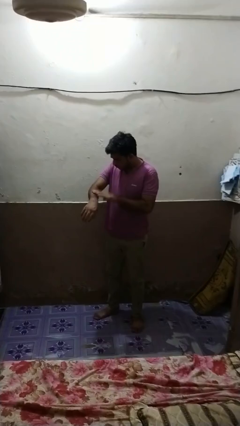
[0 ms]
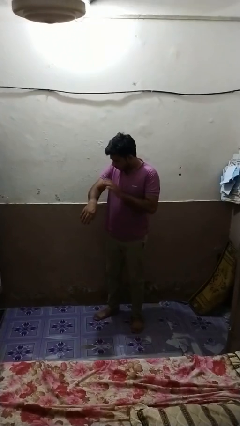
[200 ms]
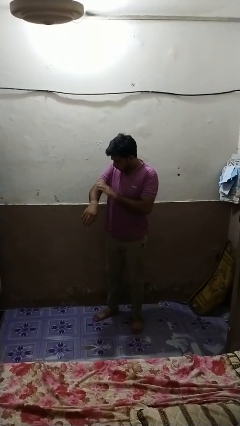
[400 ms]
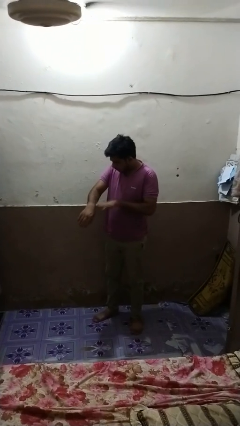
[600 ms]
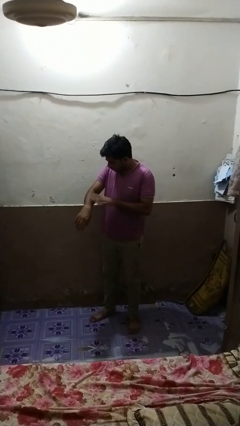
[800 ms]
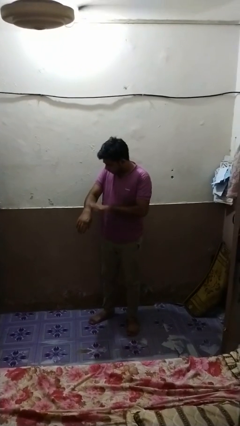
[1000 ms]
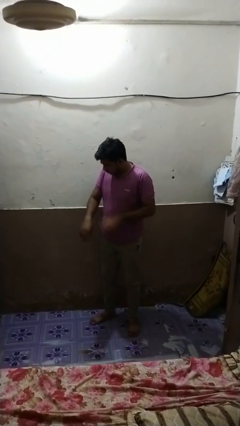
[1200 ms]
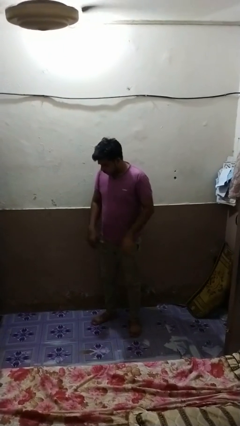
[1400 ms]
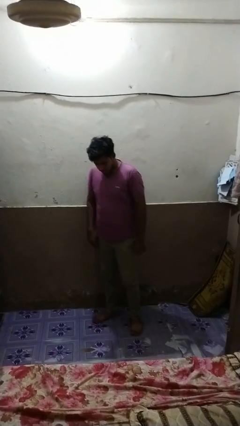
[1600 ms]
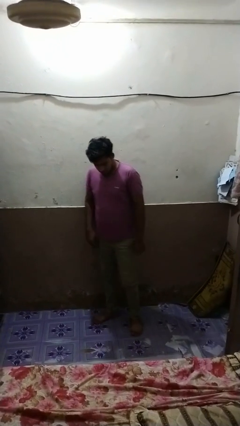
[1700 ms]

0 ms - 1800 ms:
person swats bug

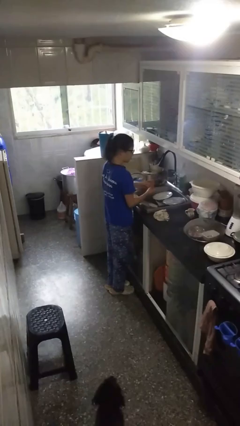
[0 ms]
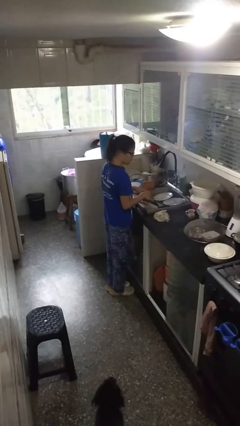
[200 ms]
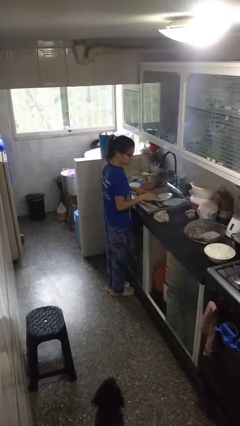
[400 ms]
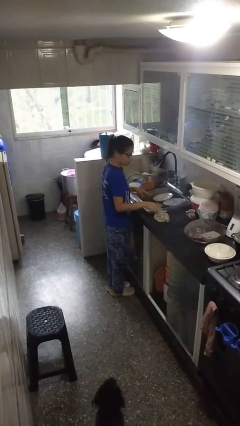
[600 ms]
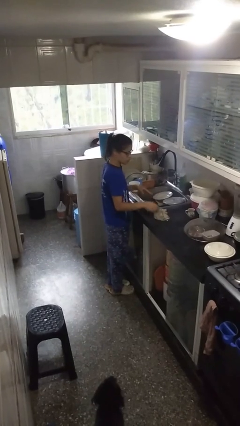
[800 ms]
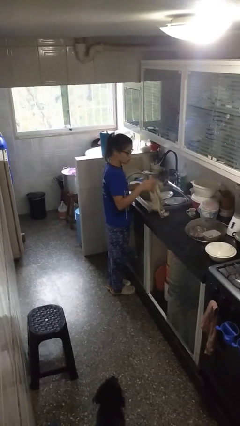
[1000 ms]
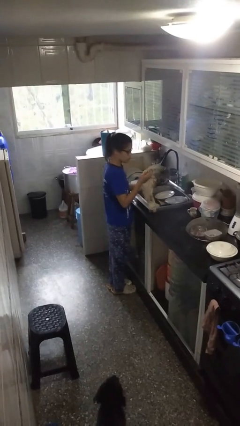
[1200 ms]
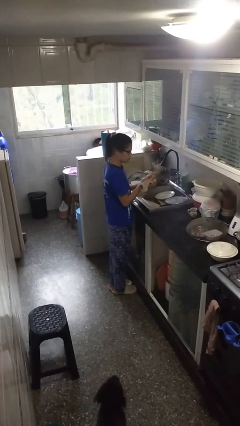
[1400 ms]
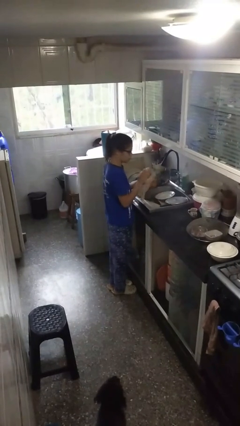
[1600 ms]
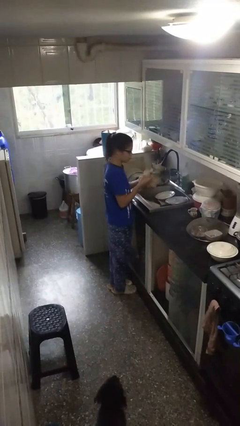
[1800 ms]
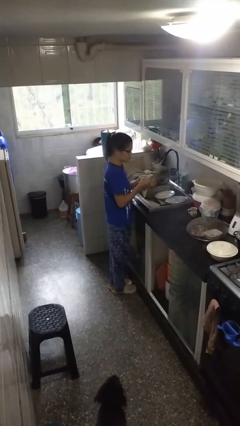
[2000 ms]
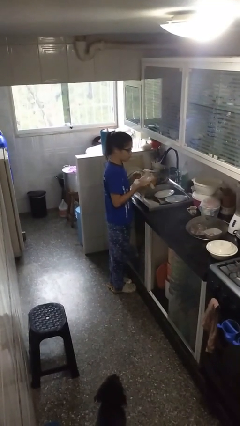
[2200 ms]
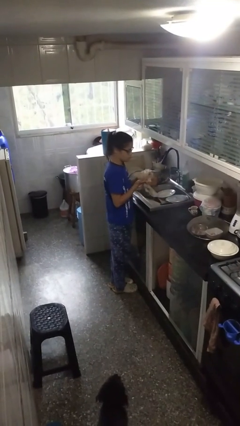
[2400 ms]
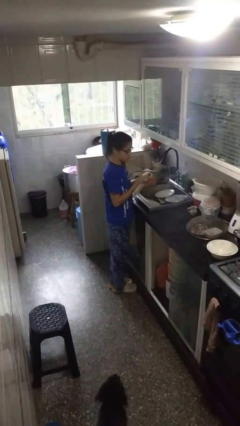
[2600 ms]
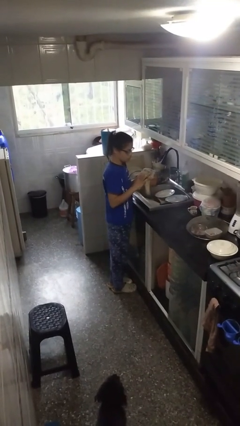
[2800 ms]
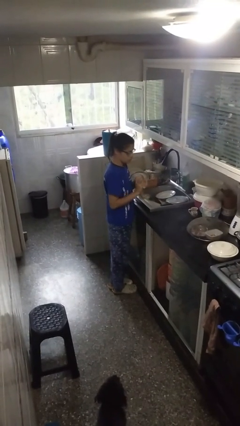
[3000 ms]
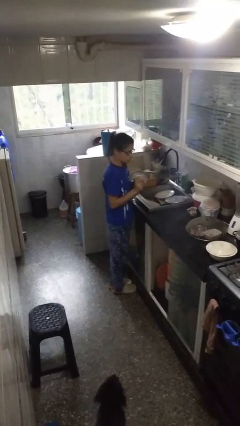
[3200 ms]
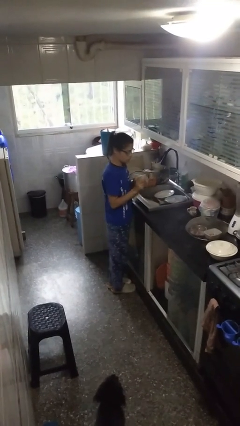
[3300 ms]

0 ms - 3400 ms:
person dries hands with towel

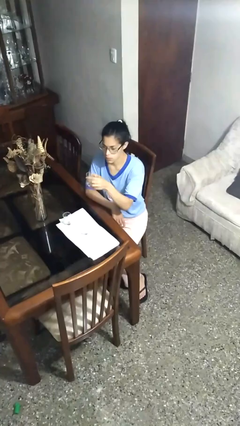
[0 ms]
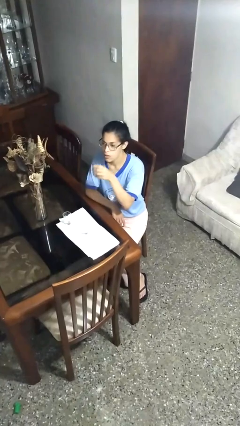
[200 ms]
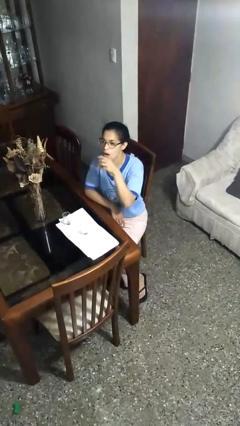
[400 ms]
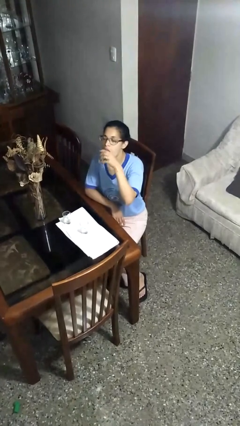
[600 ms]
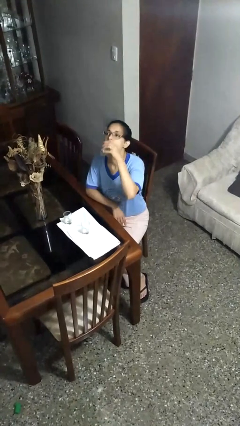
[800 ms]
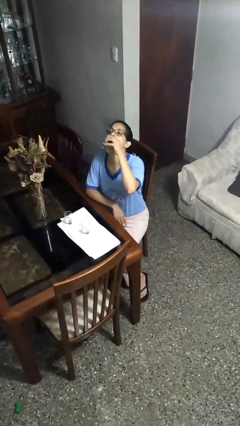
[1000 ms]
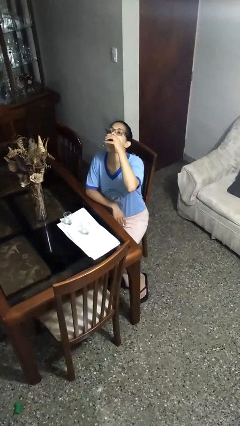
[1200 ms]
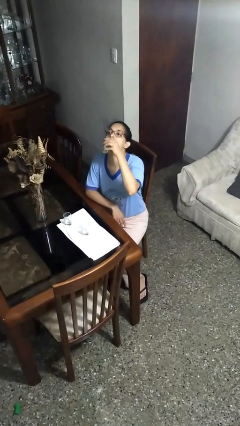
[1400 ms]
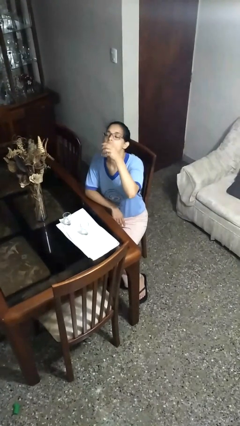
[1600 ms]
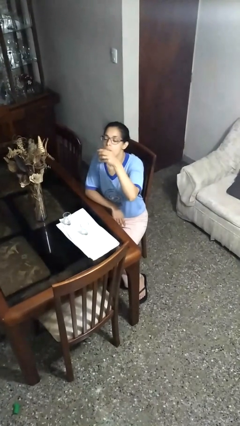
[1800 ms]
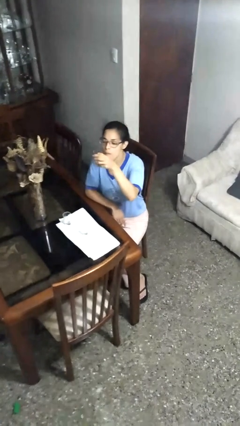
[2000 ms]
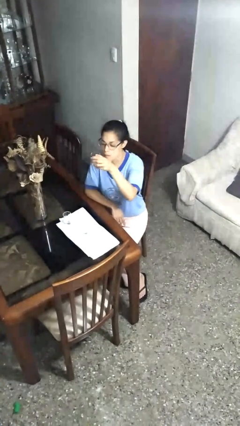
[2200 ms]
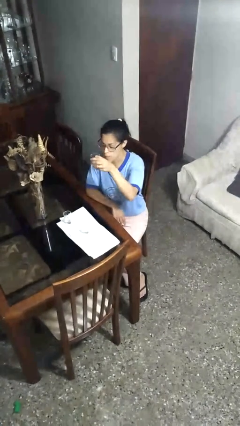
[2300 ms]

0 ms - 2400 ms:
person drinks from shotglass

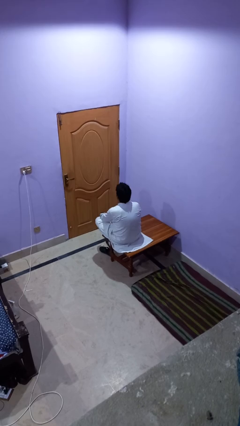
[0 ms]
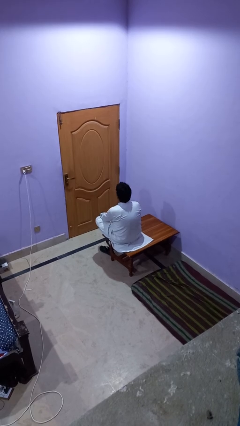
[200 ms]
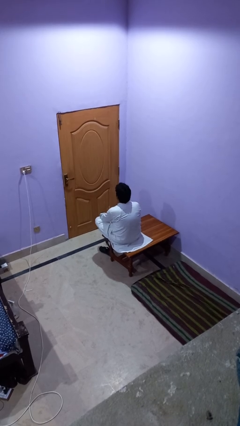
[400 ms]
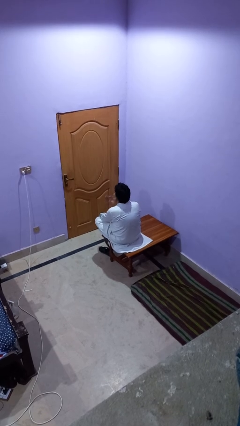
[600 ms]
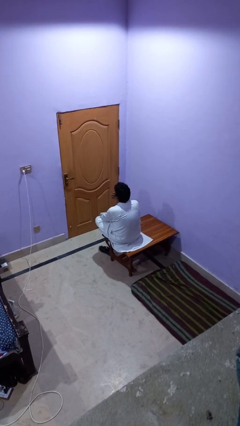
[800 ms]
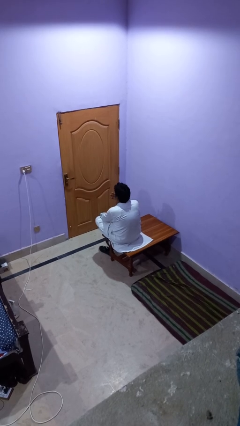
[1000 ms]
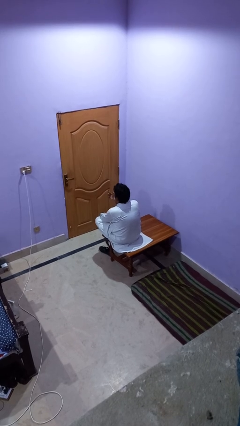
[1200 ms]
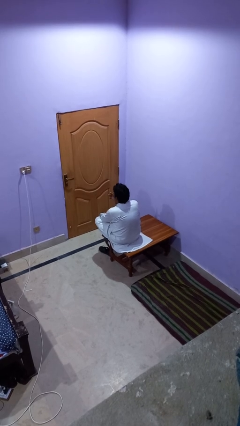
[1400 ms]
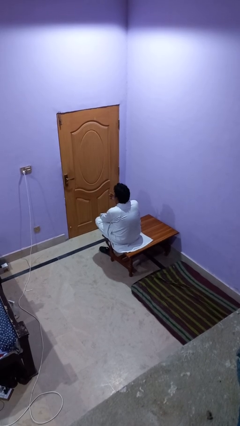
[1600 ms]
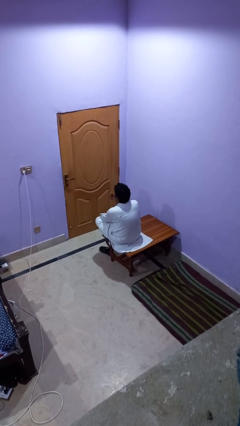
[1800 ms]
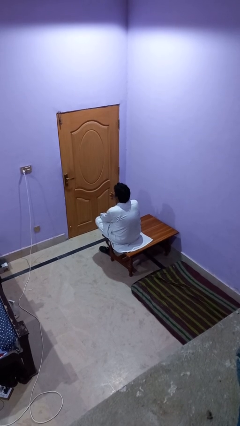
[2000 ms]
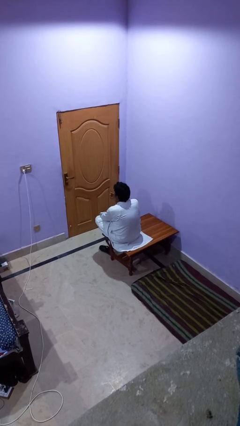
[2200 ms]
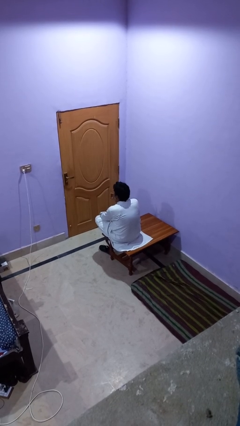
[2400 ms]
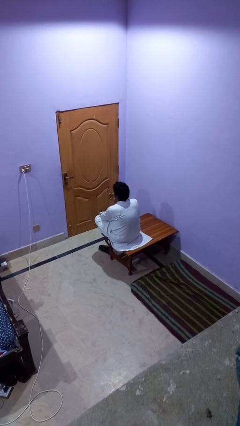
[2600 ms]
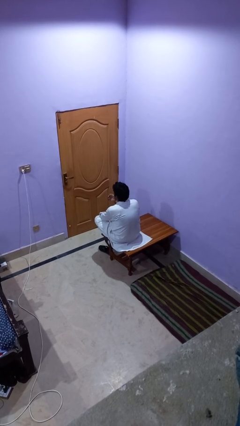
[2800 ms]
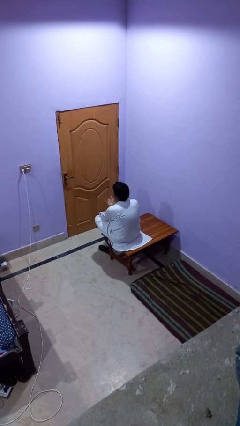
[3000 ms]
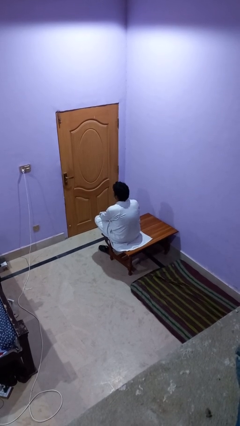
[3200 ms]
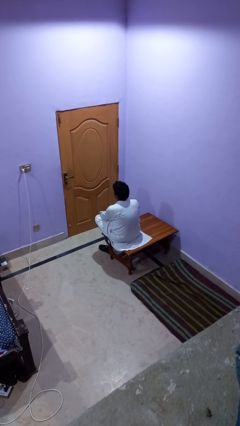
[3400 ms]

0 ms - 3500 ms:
person licks fingers

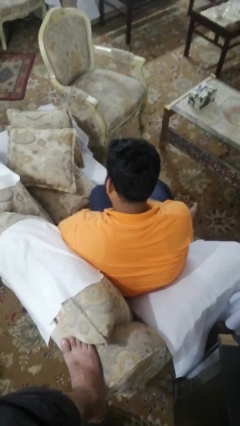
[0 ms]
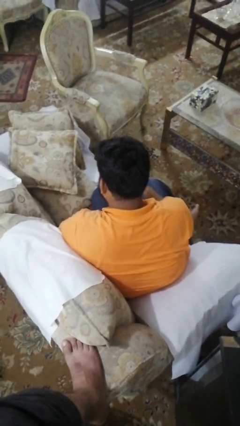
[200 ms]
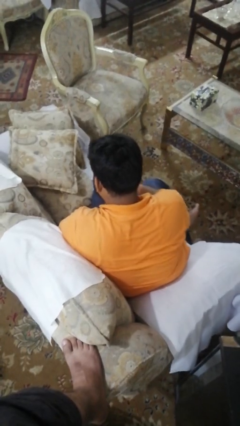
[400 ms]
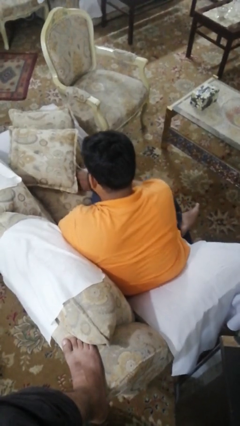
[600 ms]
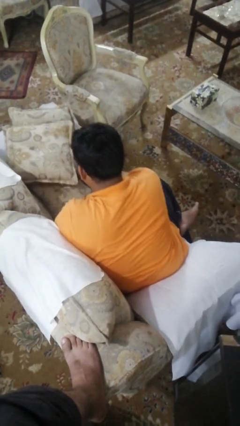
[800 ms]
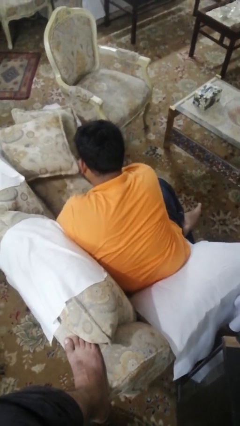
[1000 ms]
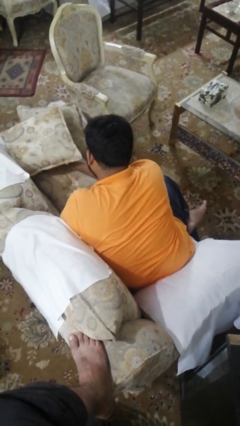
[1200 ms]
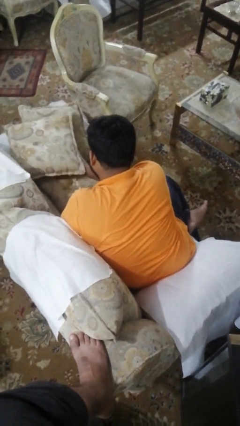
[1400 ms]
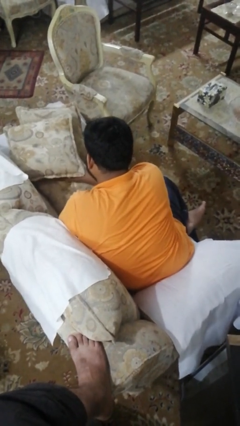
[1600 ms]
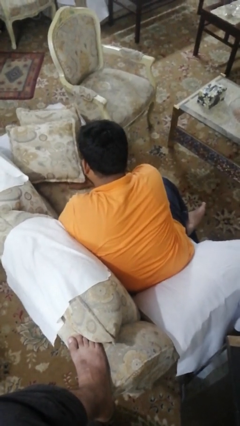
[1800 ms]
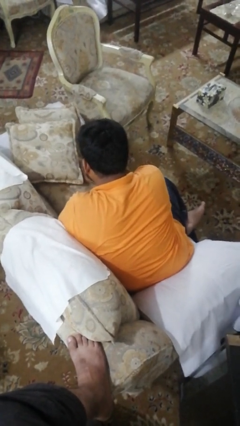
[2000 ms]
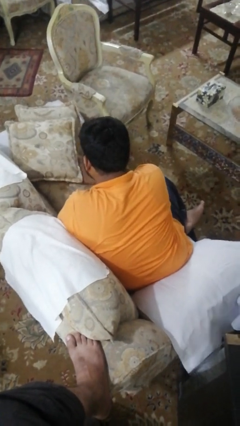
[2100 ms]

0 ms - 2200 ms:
person searches in couch

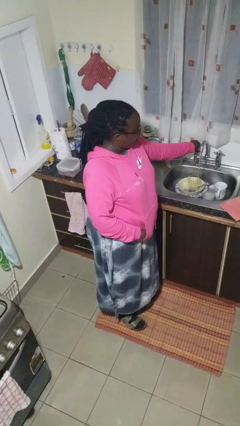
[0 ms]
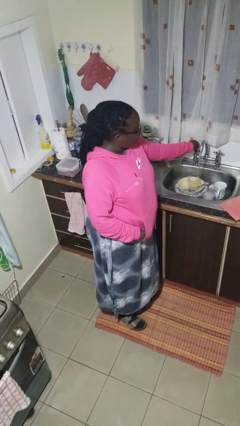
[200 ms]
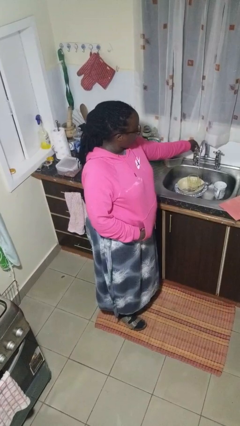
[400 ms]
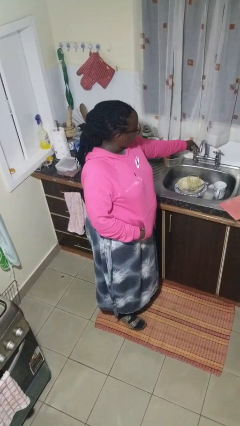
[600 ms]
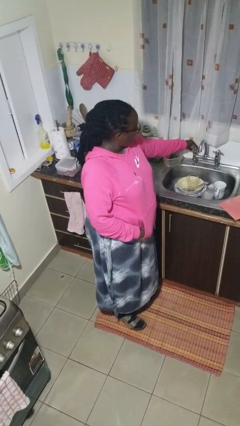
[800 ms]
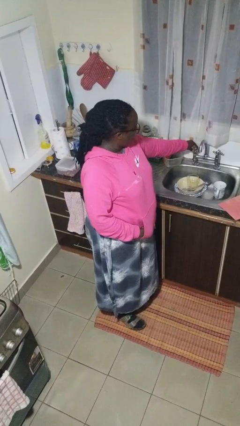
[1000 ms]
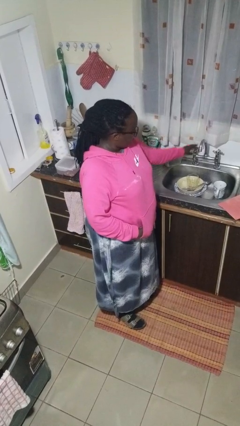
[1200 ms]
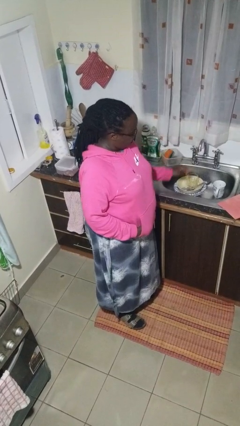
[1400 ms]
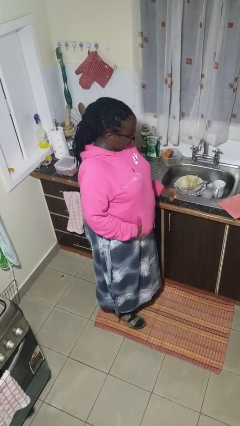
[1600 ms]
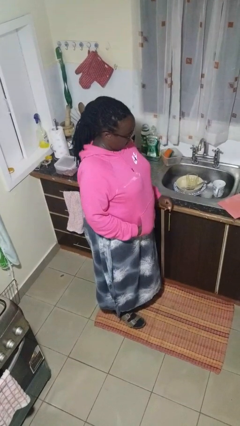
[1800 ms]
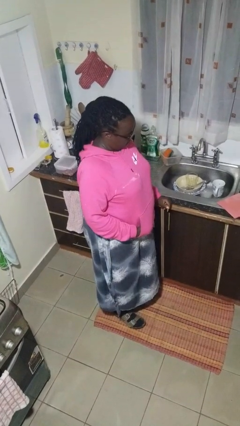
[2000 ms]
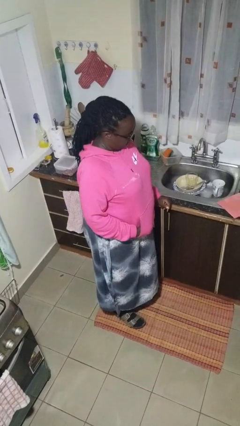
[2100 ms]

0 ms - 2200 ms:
person turns off faucet

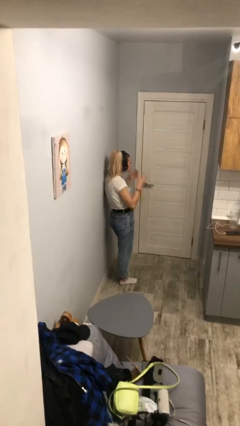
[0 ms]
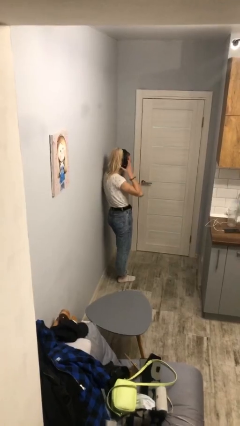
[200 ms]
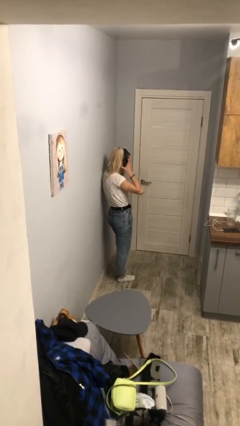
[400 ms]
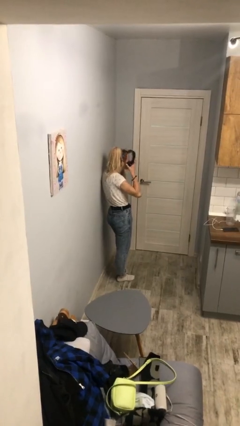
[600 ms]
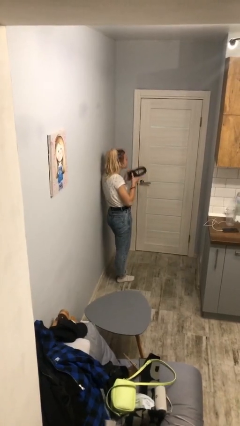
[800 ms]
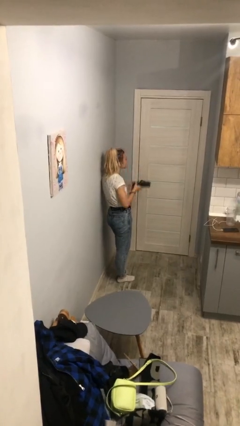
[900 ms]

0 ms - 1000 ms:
person takes off headphones

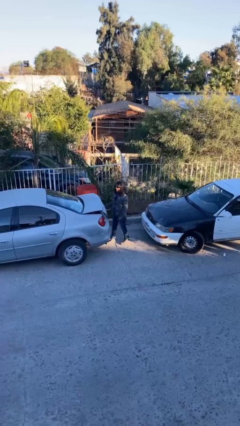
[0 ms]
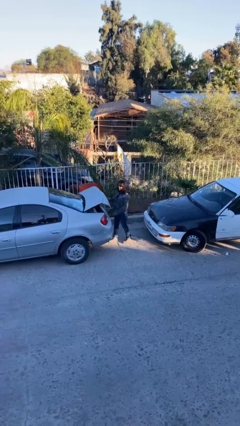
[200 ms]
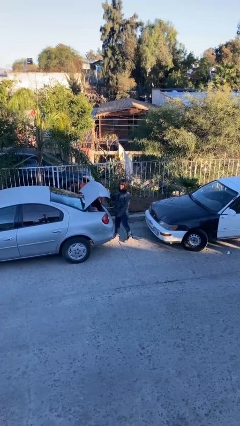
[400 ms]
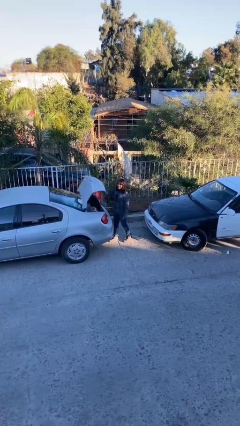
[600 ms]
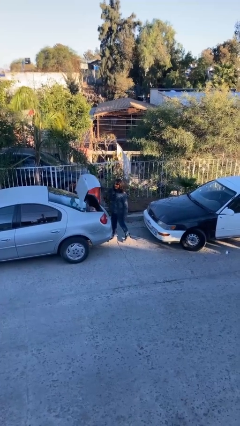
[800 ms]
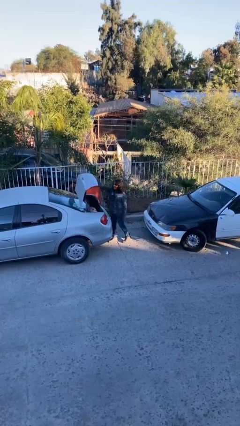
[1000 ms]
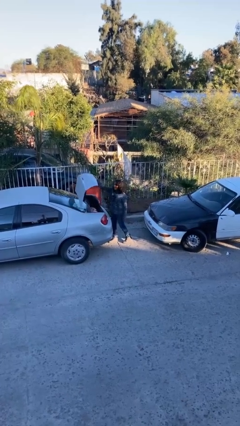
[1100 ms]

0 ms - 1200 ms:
person opens car trunk
